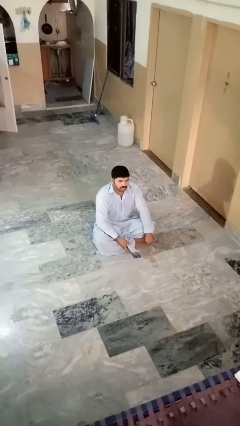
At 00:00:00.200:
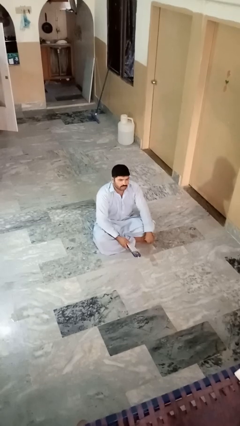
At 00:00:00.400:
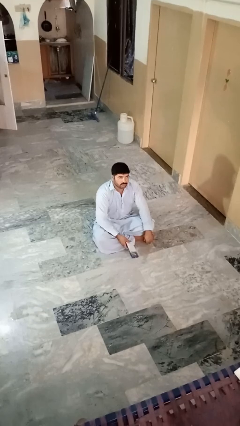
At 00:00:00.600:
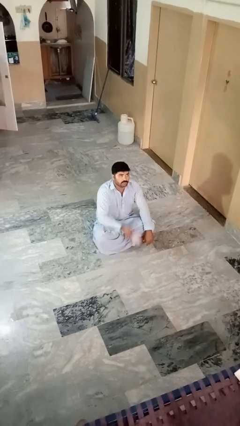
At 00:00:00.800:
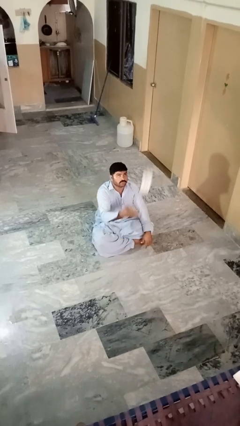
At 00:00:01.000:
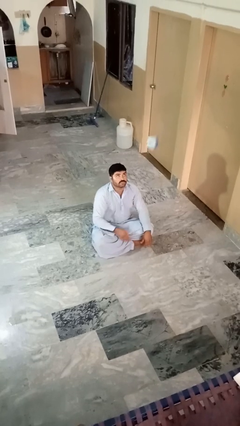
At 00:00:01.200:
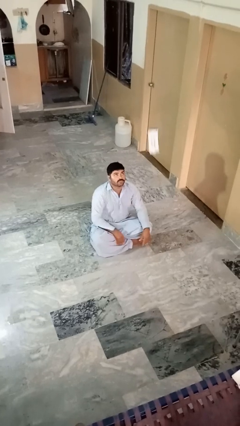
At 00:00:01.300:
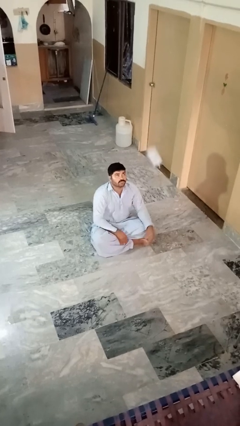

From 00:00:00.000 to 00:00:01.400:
person drops object

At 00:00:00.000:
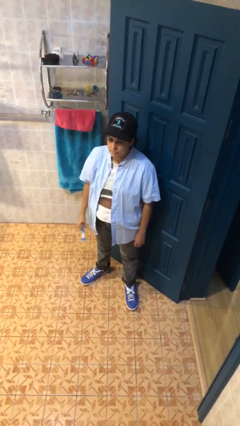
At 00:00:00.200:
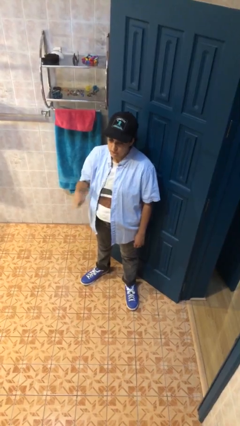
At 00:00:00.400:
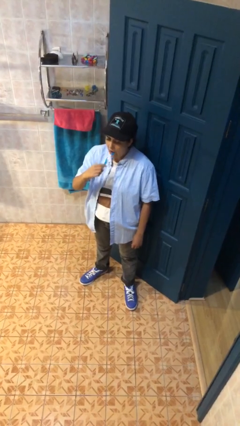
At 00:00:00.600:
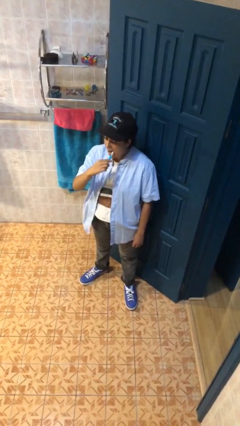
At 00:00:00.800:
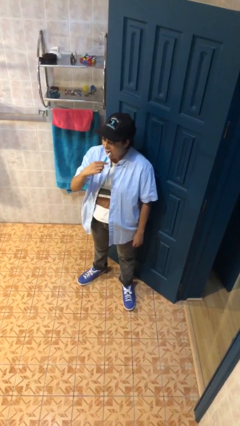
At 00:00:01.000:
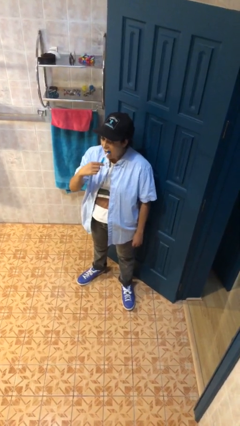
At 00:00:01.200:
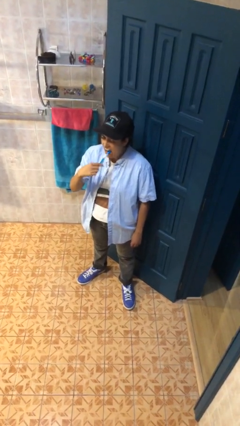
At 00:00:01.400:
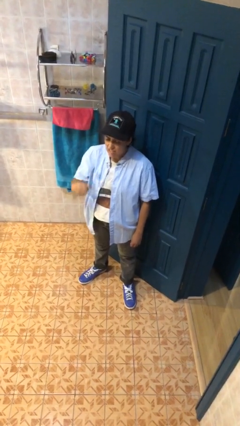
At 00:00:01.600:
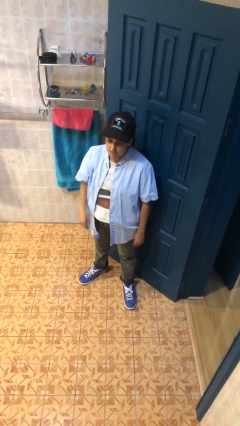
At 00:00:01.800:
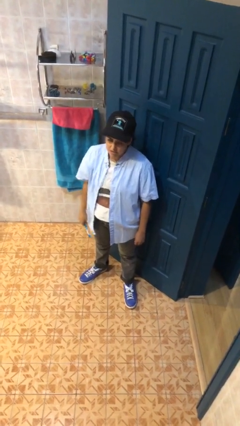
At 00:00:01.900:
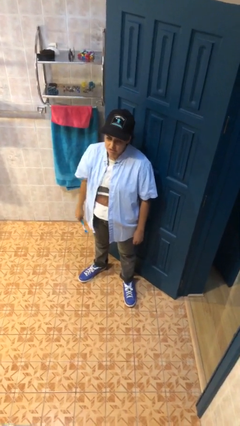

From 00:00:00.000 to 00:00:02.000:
person brushes teeth

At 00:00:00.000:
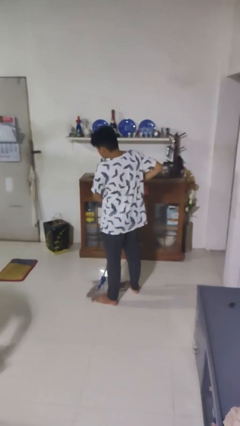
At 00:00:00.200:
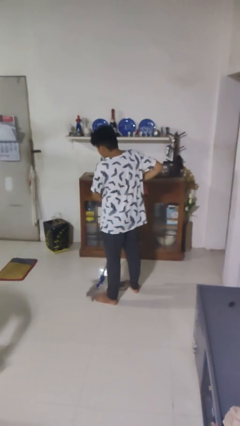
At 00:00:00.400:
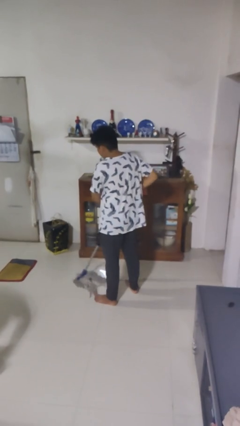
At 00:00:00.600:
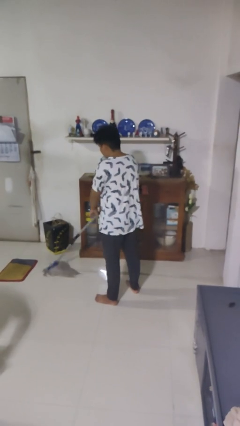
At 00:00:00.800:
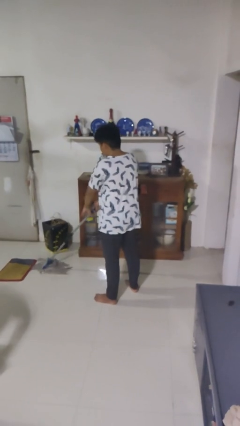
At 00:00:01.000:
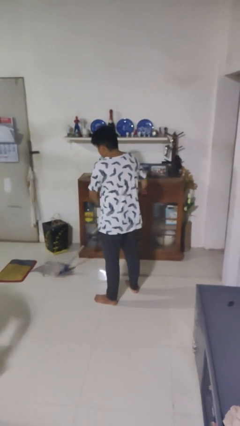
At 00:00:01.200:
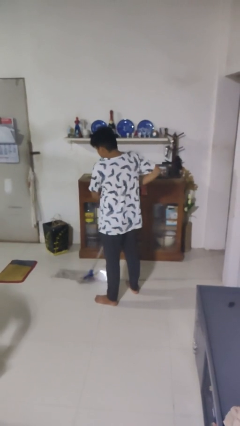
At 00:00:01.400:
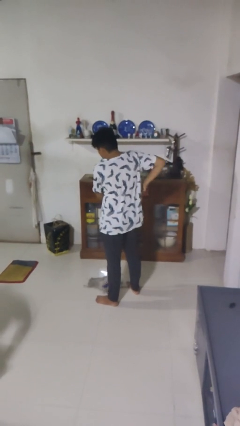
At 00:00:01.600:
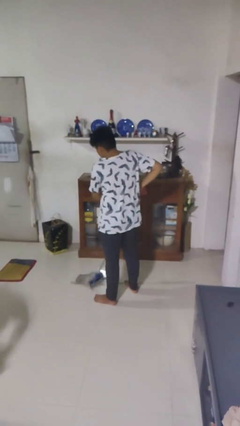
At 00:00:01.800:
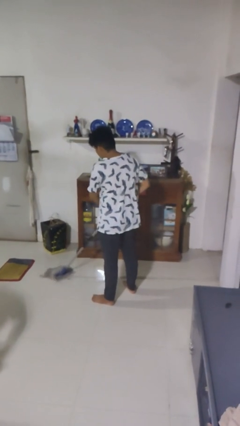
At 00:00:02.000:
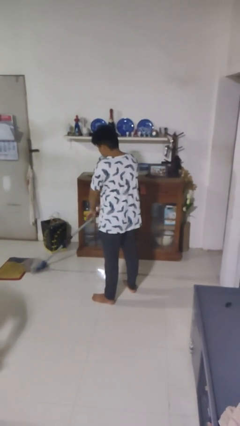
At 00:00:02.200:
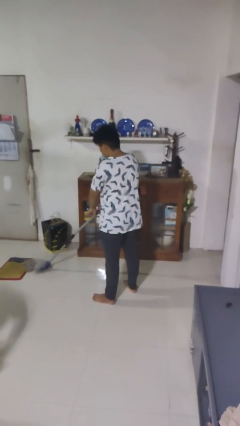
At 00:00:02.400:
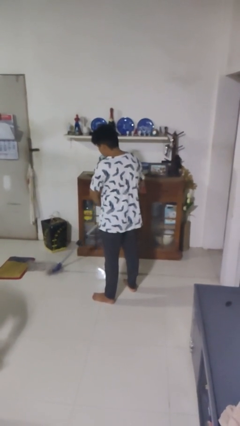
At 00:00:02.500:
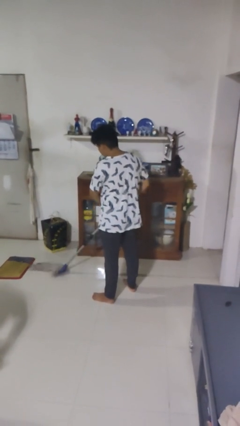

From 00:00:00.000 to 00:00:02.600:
person mops

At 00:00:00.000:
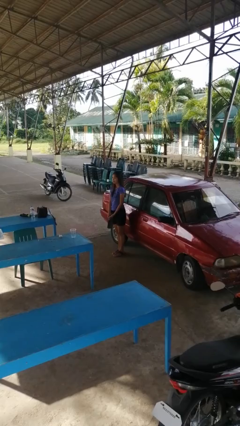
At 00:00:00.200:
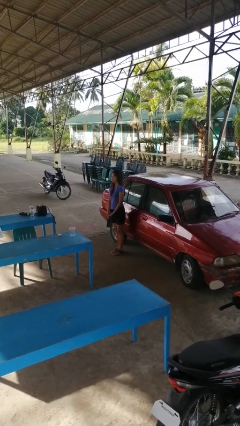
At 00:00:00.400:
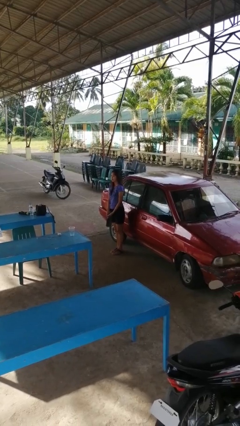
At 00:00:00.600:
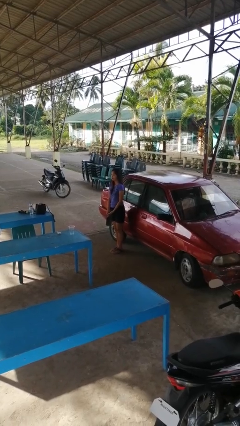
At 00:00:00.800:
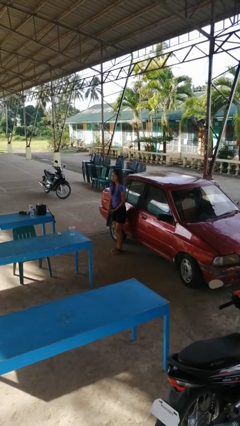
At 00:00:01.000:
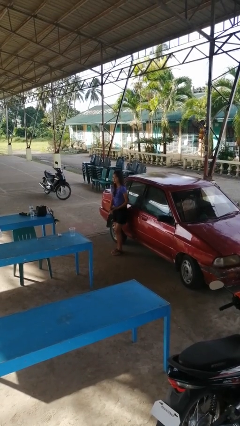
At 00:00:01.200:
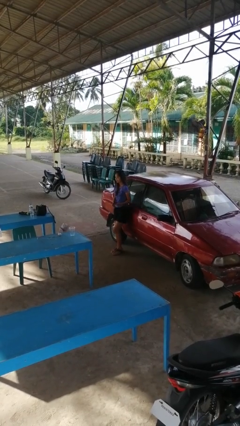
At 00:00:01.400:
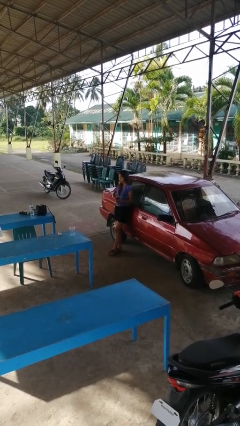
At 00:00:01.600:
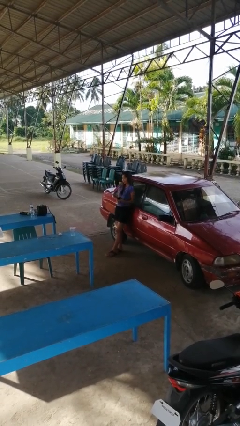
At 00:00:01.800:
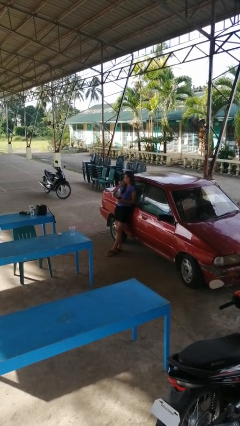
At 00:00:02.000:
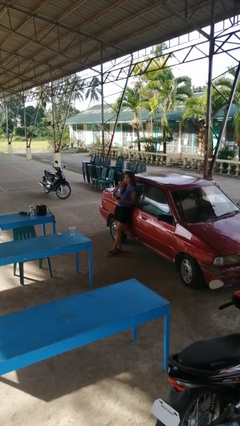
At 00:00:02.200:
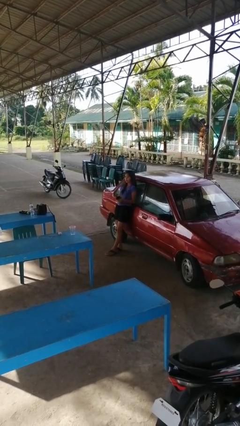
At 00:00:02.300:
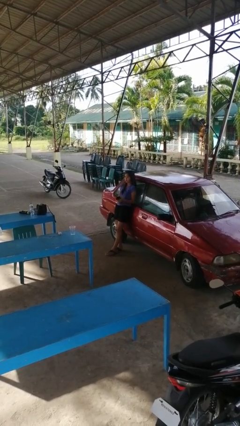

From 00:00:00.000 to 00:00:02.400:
person leans against car

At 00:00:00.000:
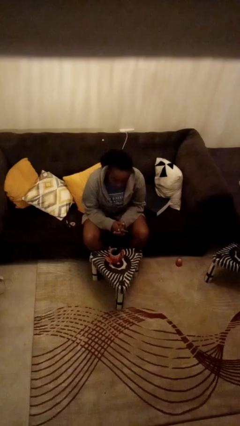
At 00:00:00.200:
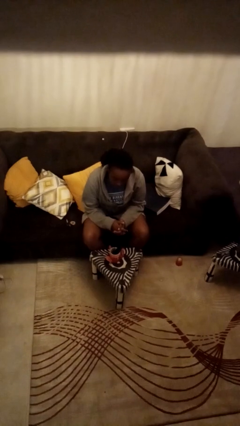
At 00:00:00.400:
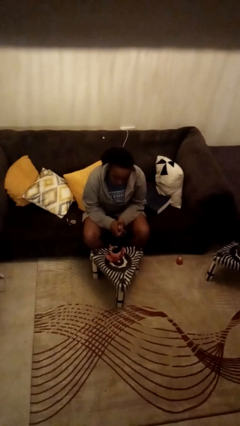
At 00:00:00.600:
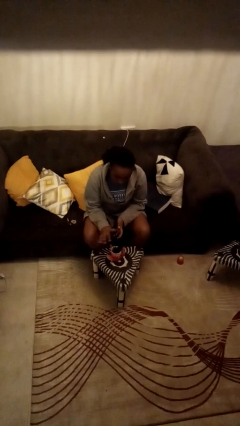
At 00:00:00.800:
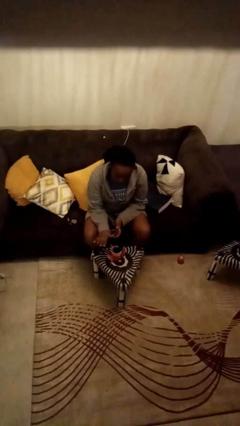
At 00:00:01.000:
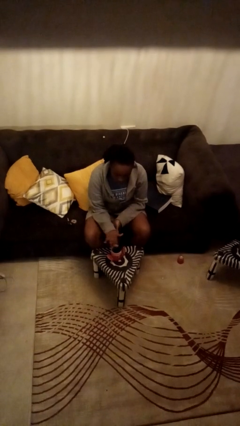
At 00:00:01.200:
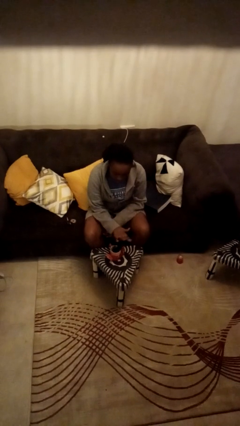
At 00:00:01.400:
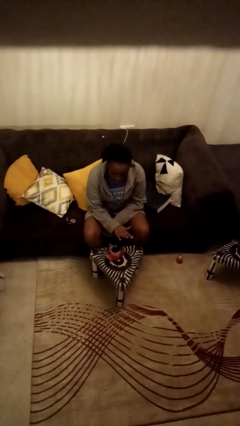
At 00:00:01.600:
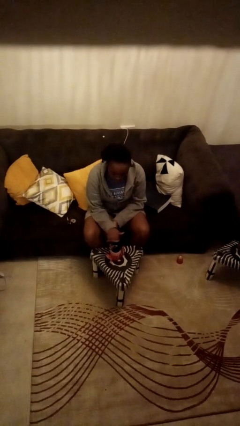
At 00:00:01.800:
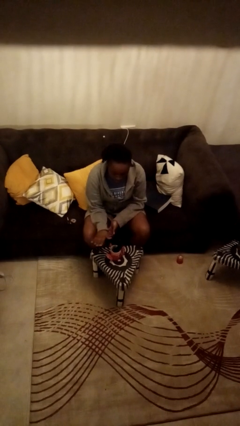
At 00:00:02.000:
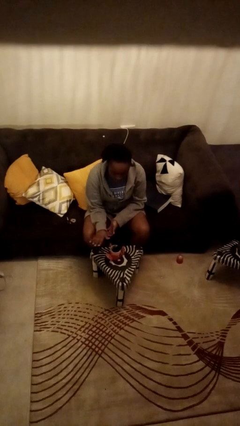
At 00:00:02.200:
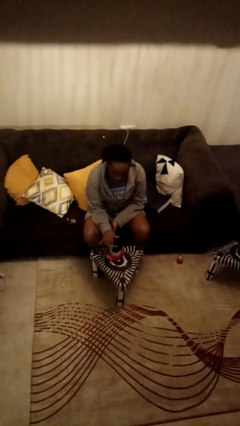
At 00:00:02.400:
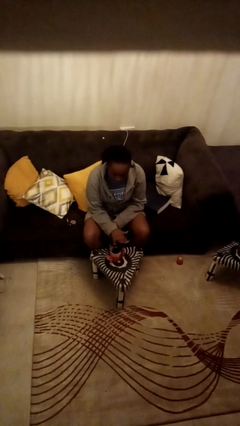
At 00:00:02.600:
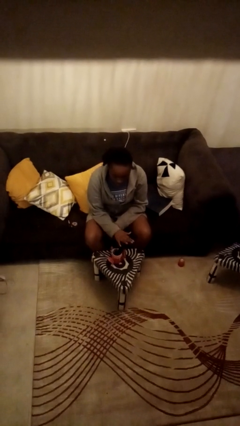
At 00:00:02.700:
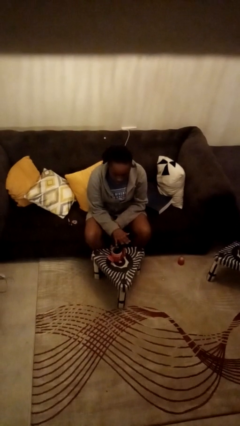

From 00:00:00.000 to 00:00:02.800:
person waves hand over object

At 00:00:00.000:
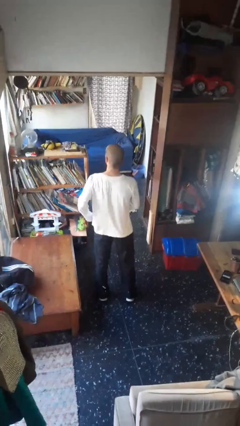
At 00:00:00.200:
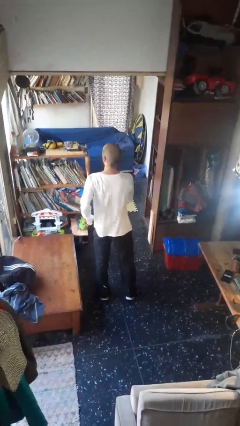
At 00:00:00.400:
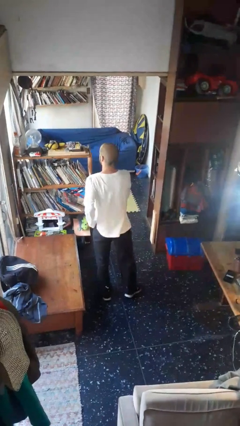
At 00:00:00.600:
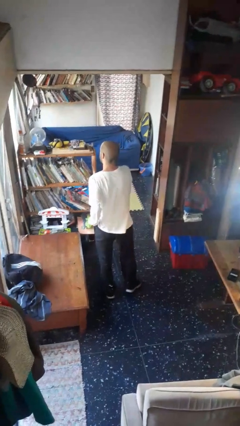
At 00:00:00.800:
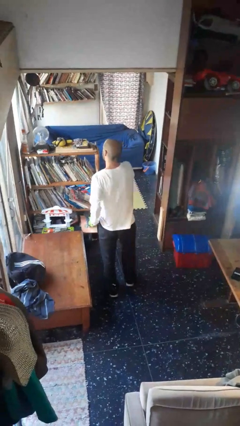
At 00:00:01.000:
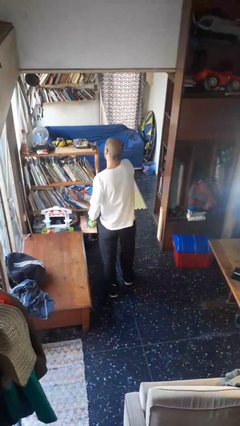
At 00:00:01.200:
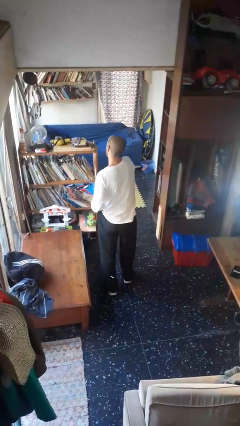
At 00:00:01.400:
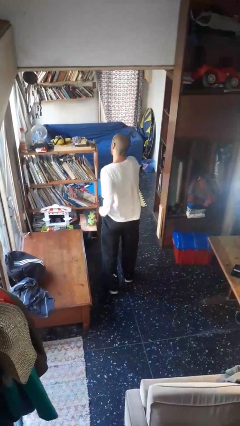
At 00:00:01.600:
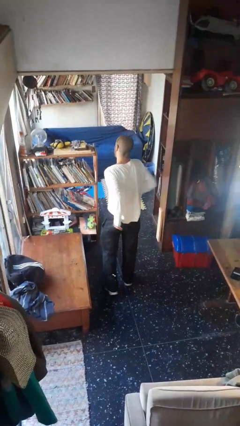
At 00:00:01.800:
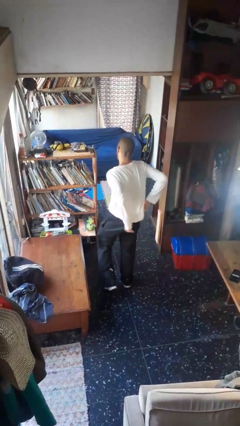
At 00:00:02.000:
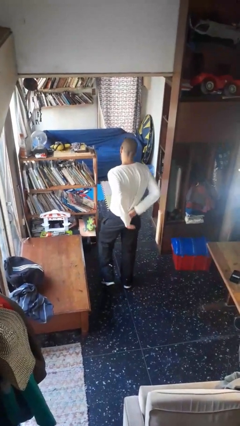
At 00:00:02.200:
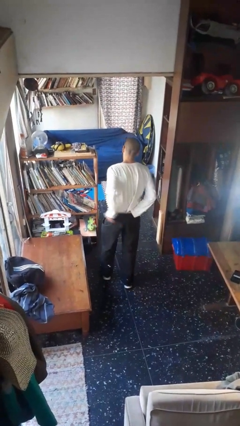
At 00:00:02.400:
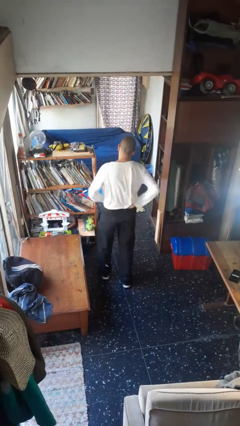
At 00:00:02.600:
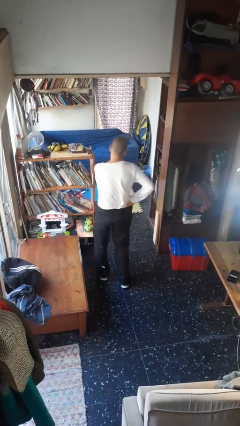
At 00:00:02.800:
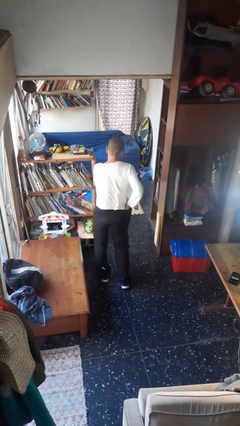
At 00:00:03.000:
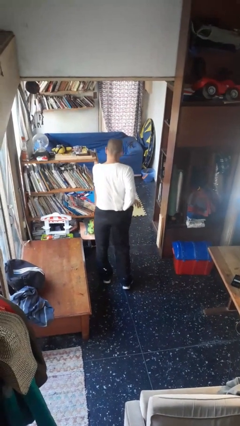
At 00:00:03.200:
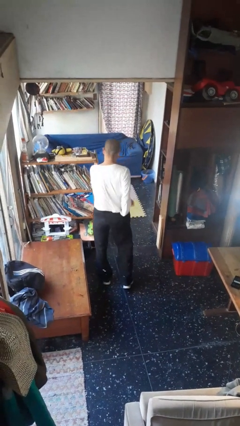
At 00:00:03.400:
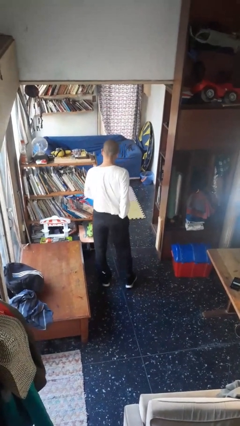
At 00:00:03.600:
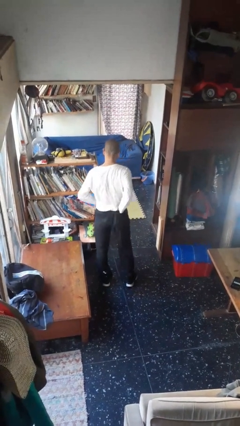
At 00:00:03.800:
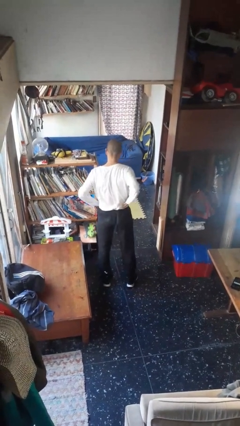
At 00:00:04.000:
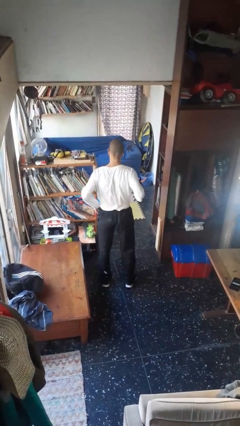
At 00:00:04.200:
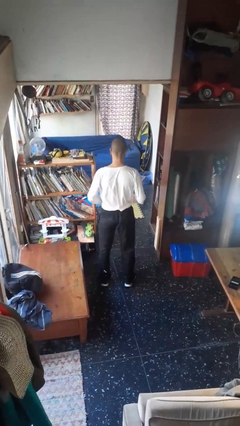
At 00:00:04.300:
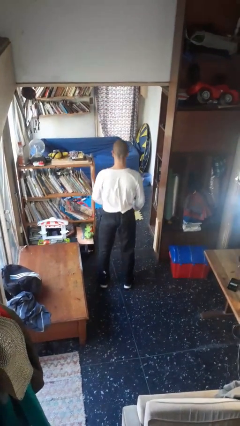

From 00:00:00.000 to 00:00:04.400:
person tucks in shirt

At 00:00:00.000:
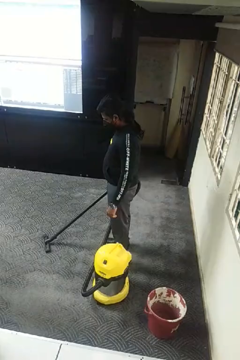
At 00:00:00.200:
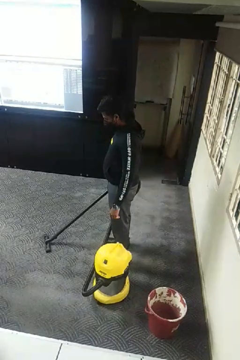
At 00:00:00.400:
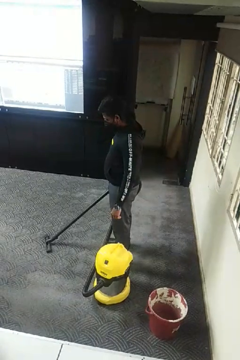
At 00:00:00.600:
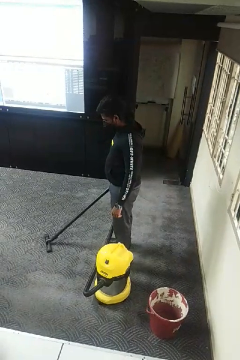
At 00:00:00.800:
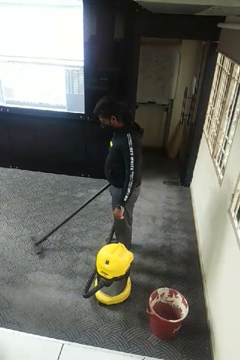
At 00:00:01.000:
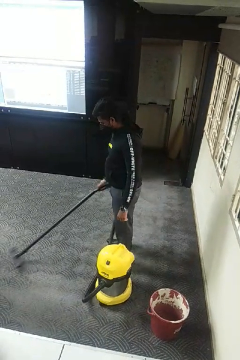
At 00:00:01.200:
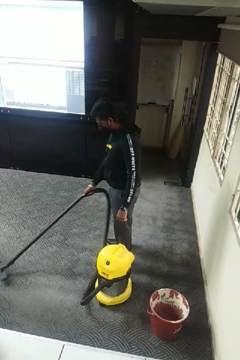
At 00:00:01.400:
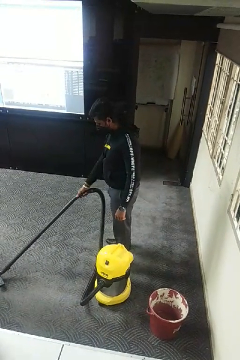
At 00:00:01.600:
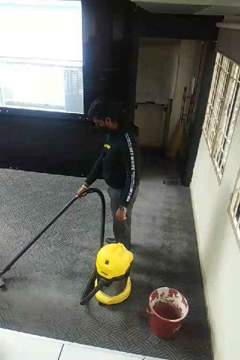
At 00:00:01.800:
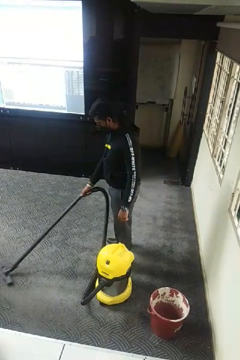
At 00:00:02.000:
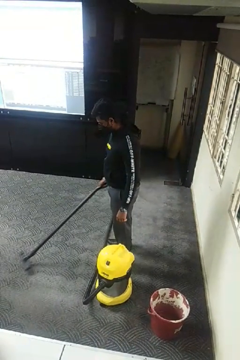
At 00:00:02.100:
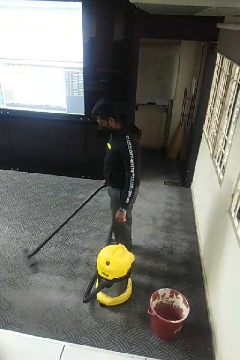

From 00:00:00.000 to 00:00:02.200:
person vacuums carpet
